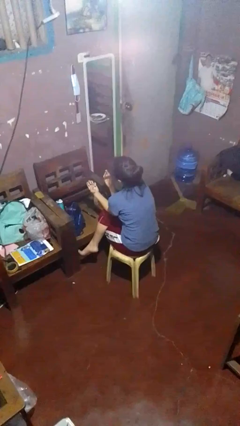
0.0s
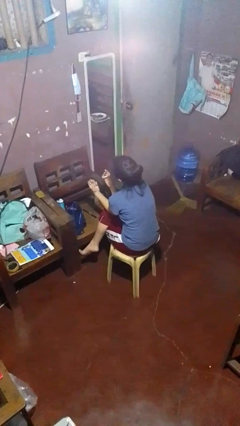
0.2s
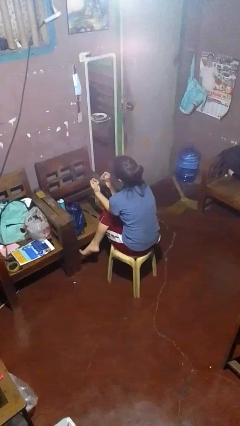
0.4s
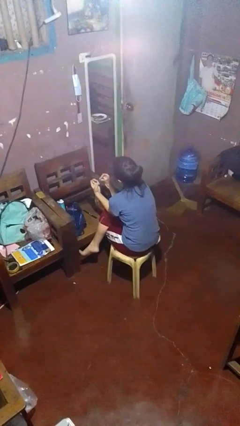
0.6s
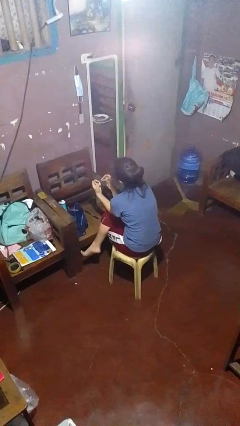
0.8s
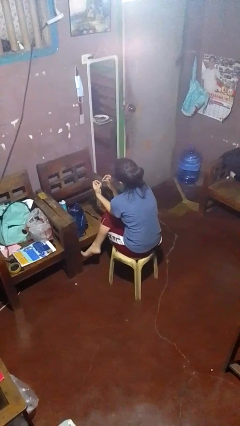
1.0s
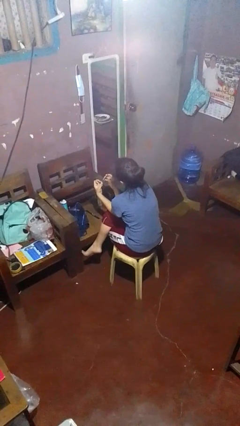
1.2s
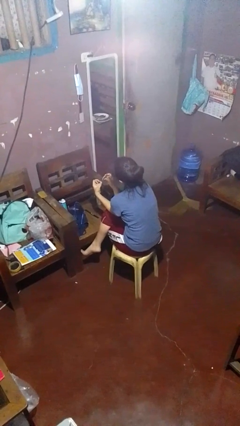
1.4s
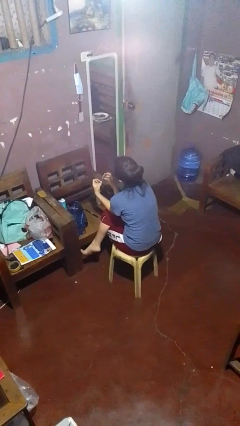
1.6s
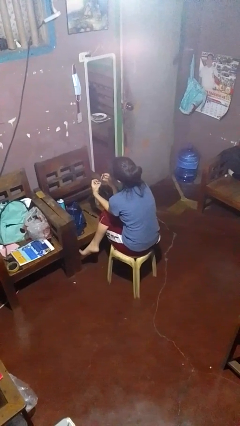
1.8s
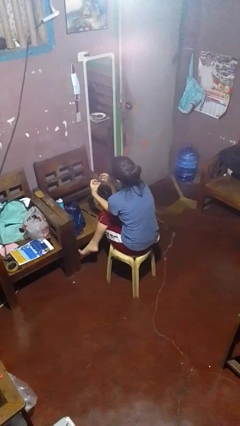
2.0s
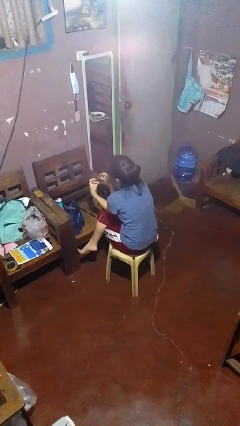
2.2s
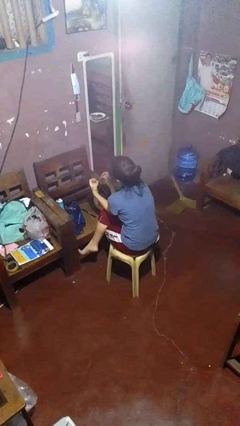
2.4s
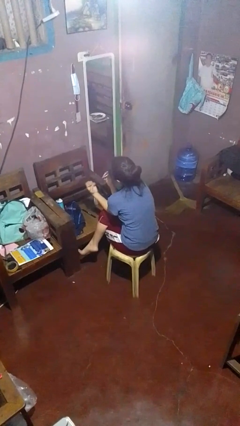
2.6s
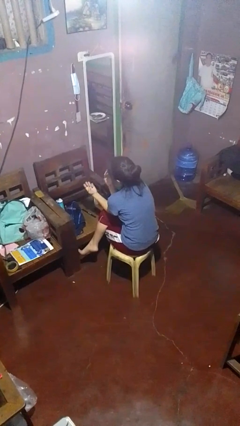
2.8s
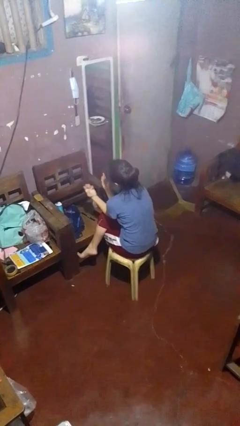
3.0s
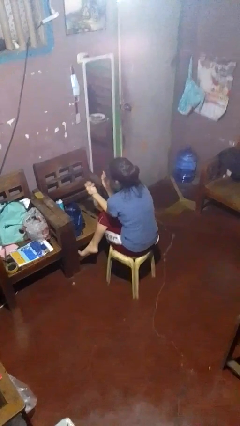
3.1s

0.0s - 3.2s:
person clips fingernails

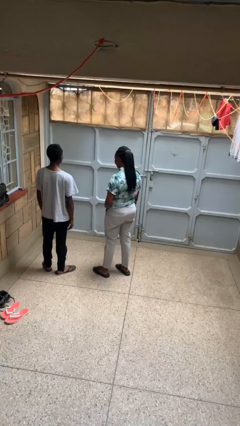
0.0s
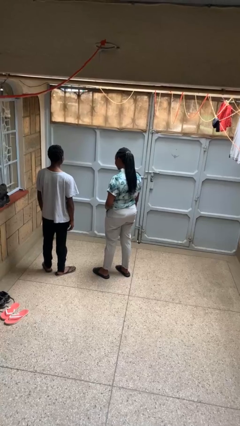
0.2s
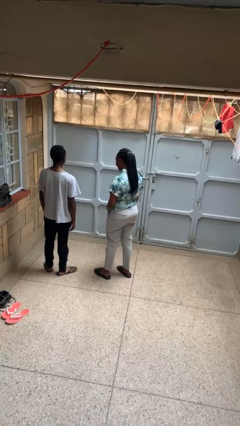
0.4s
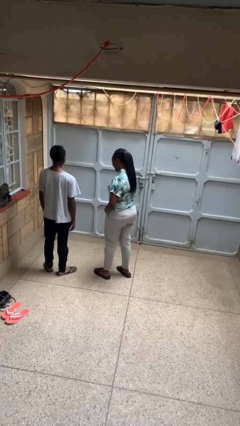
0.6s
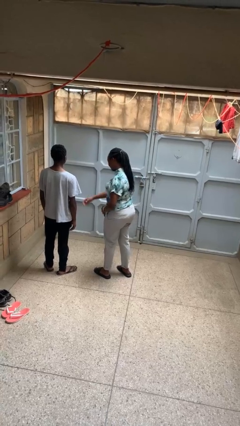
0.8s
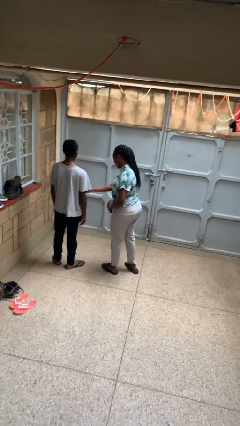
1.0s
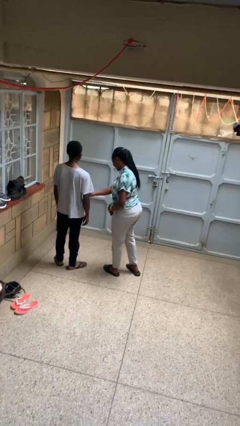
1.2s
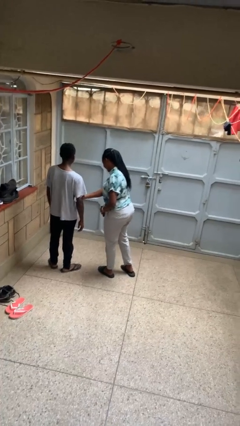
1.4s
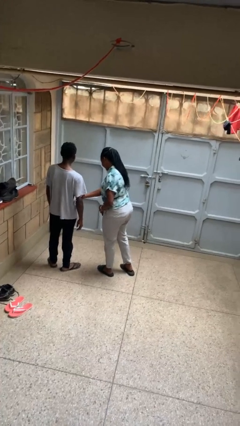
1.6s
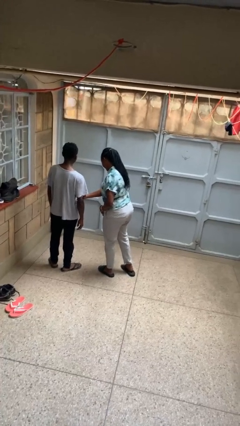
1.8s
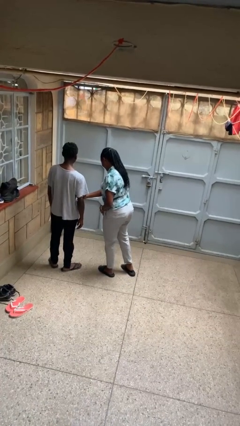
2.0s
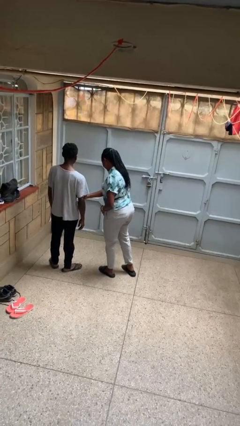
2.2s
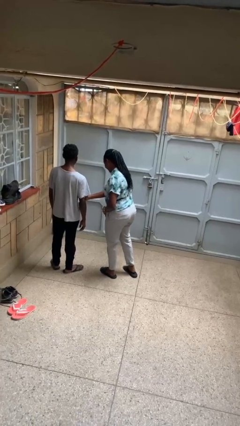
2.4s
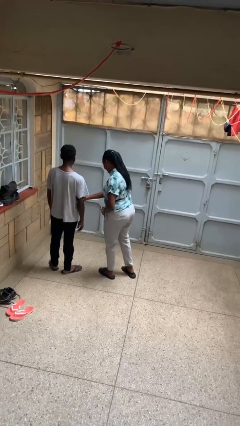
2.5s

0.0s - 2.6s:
person grabs person by bicep

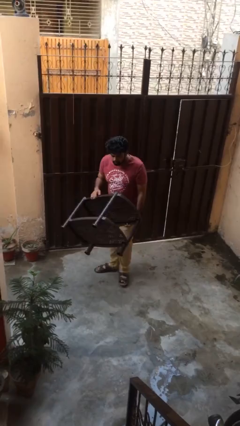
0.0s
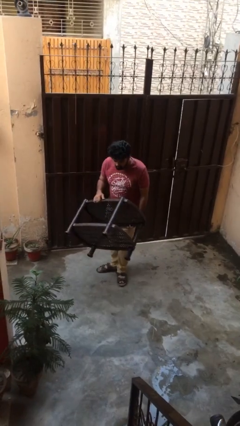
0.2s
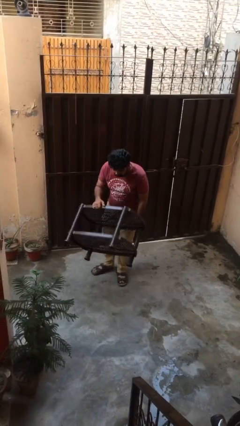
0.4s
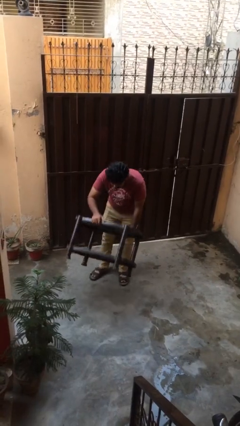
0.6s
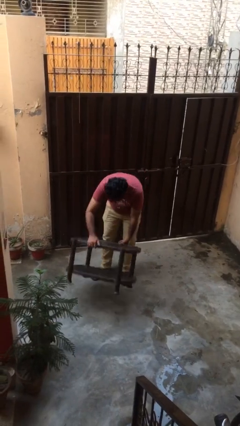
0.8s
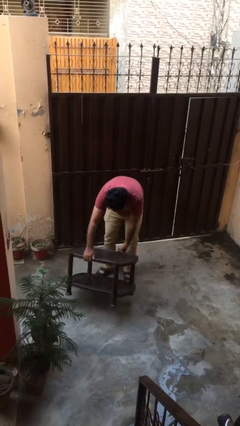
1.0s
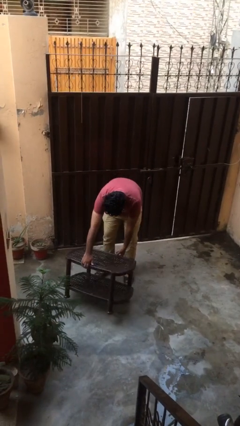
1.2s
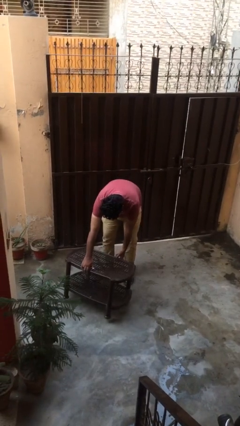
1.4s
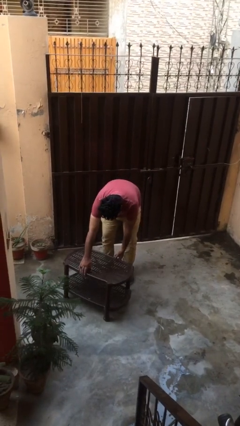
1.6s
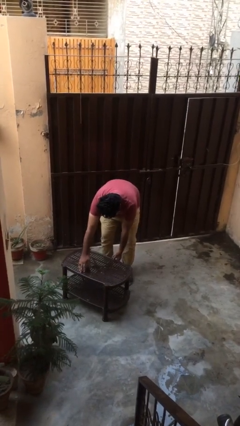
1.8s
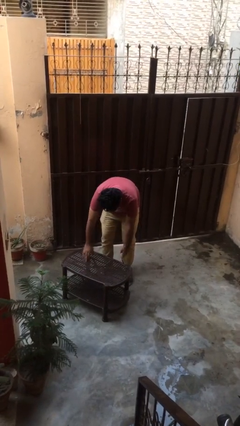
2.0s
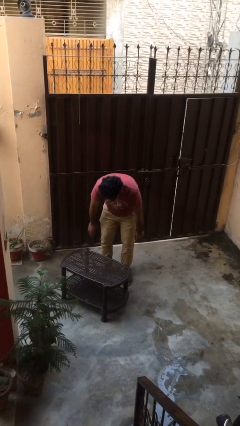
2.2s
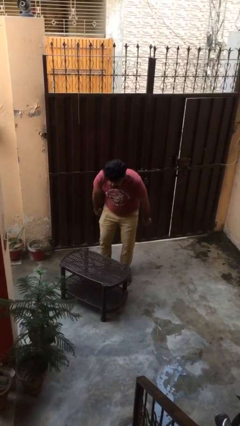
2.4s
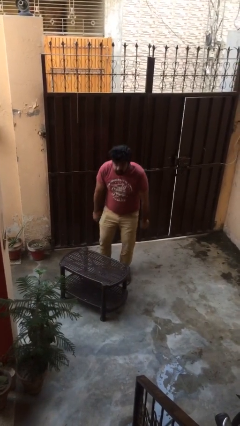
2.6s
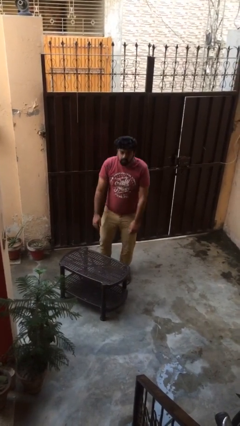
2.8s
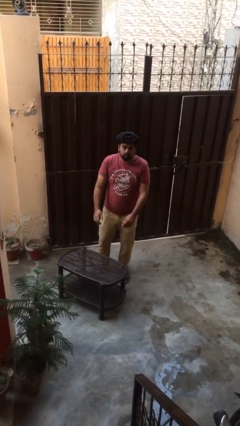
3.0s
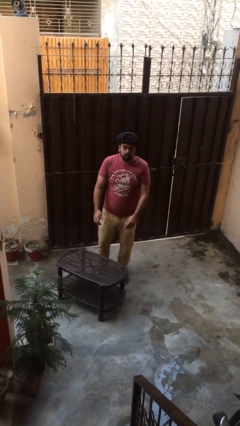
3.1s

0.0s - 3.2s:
person puts down object on floor

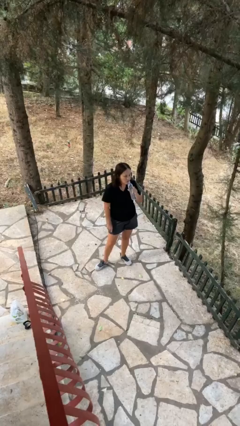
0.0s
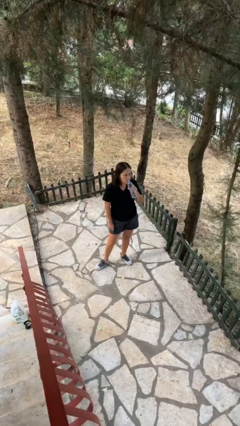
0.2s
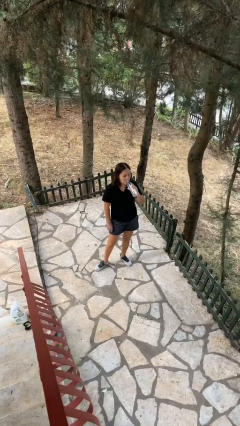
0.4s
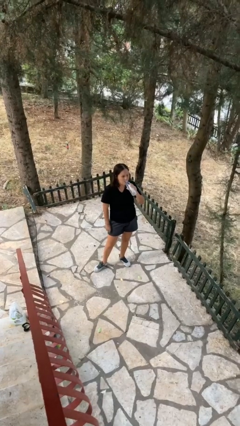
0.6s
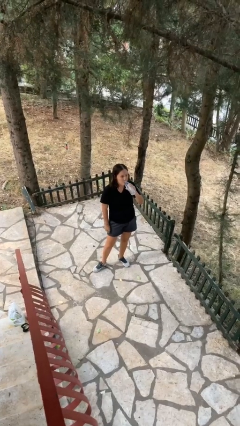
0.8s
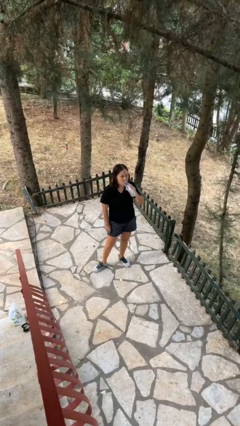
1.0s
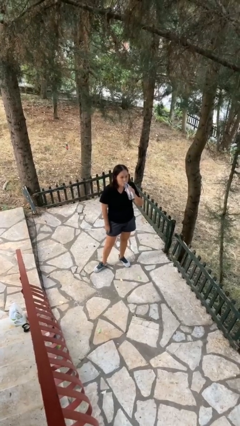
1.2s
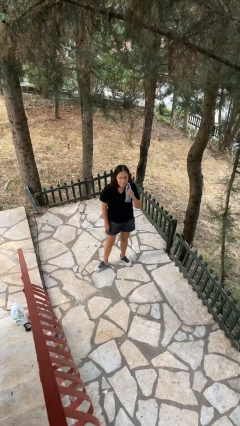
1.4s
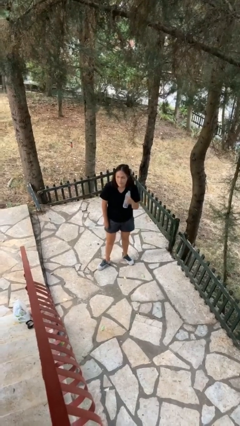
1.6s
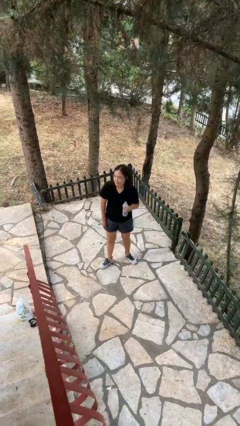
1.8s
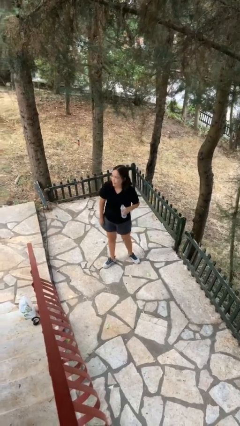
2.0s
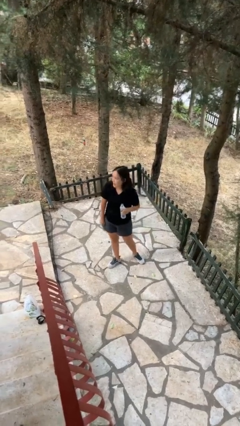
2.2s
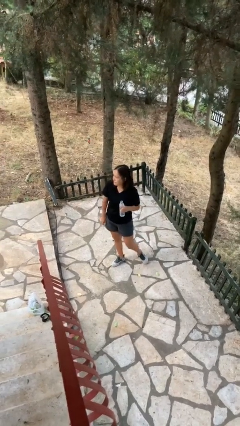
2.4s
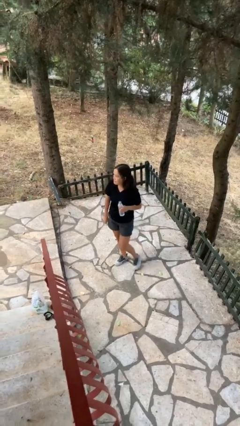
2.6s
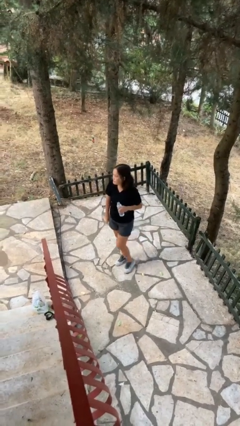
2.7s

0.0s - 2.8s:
person drinks from bottle

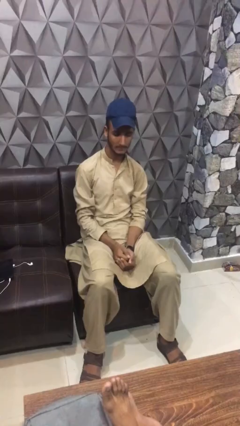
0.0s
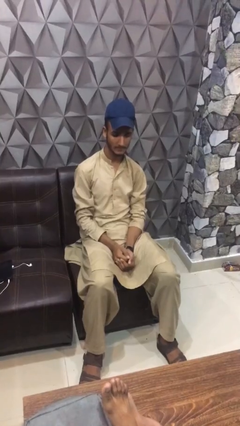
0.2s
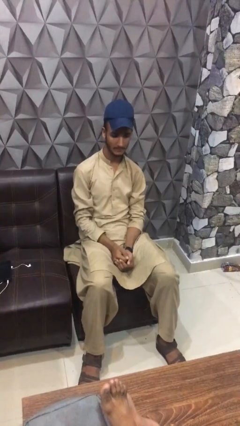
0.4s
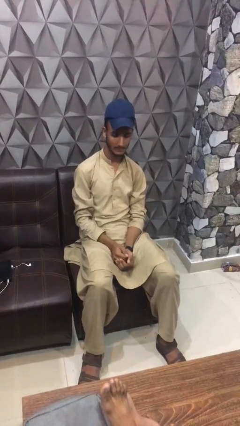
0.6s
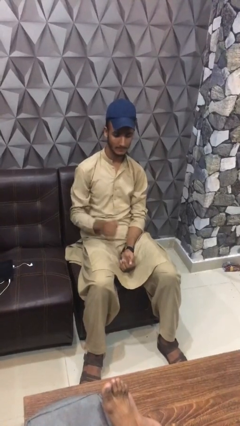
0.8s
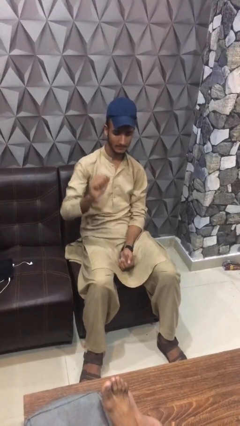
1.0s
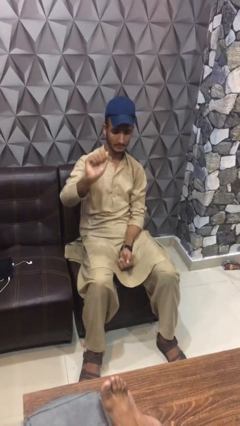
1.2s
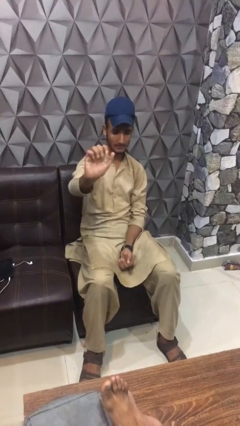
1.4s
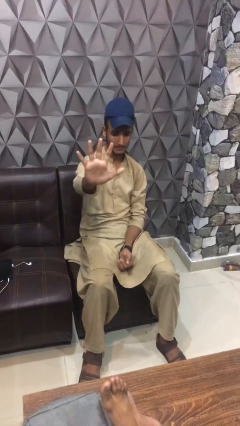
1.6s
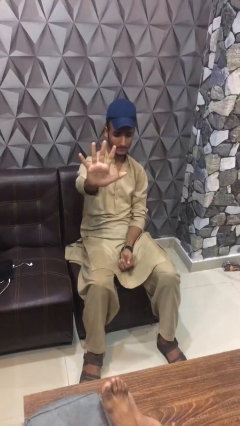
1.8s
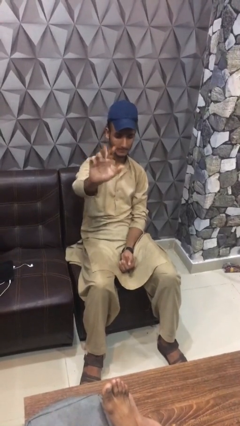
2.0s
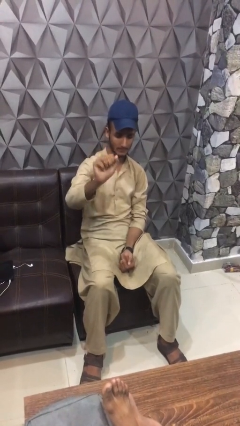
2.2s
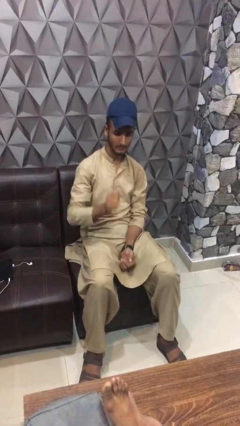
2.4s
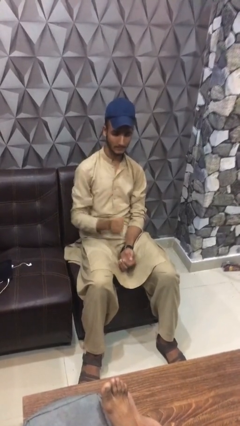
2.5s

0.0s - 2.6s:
person gestures number five

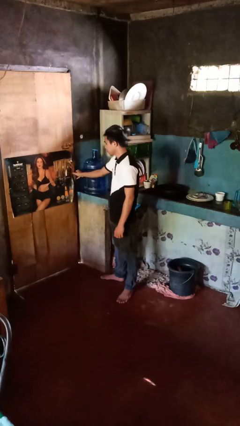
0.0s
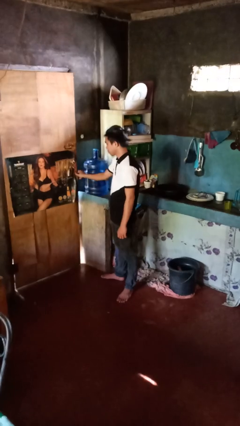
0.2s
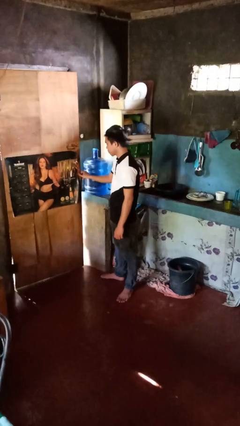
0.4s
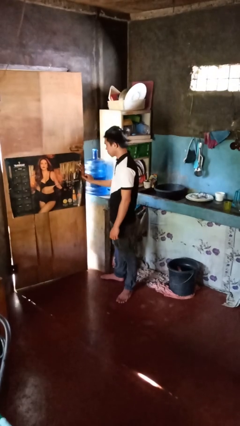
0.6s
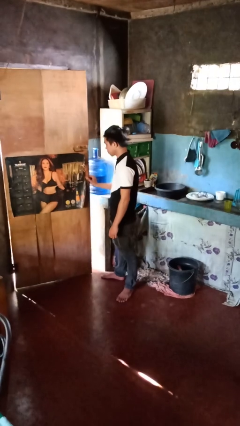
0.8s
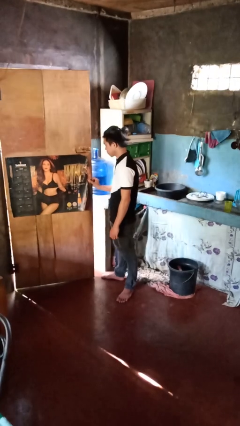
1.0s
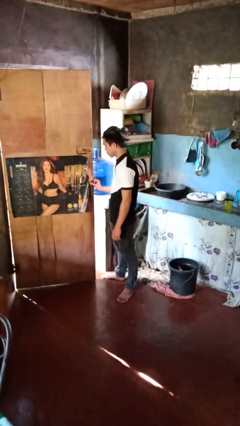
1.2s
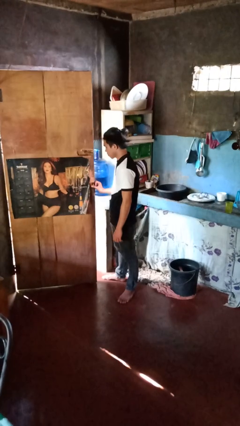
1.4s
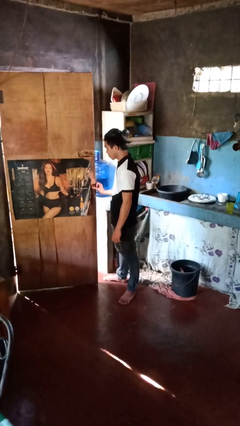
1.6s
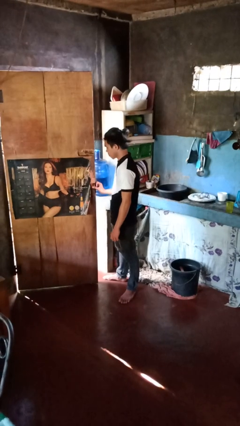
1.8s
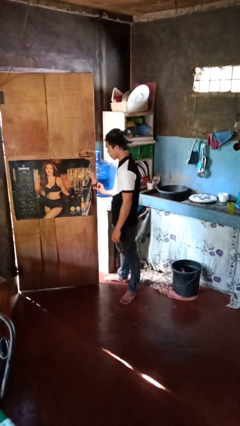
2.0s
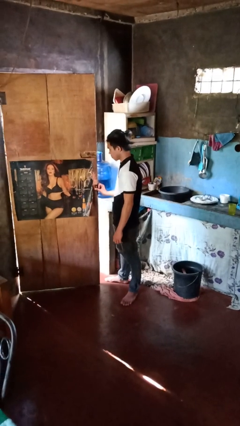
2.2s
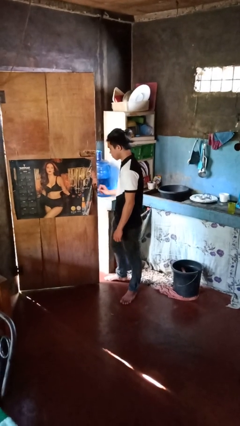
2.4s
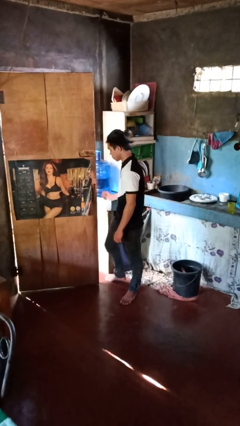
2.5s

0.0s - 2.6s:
person opens facility door
